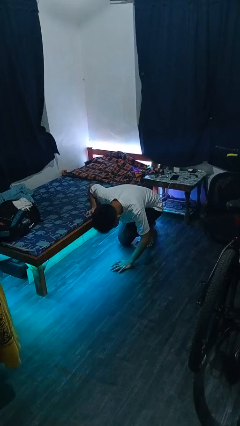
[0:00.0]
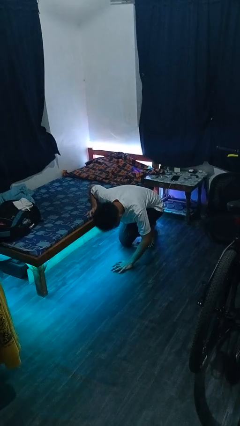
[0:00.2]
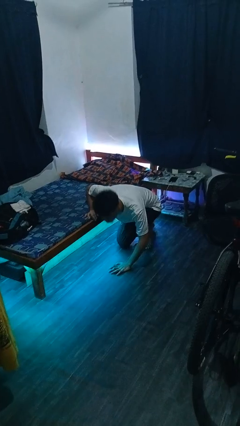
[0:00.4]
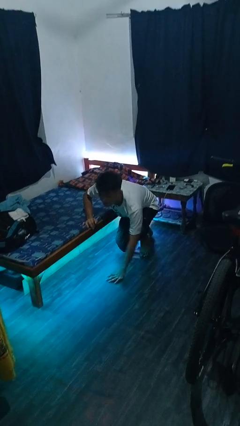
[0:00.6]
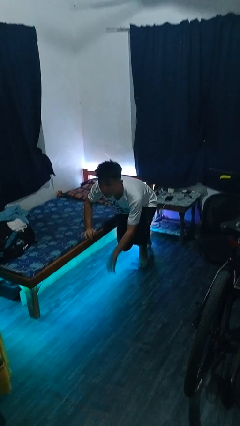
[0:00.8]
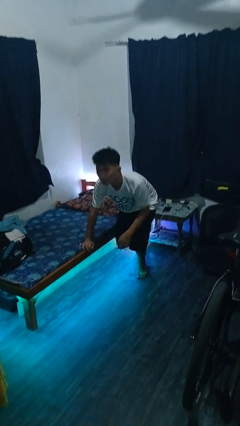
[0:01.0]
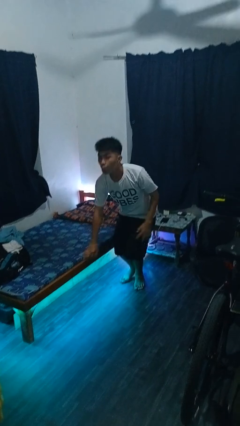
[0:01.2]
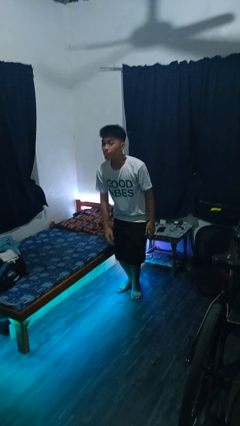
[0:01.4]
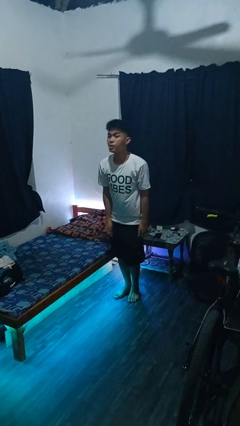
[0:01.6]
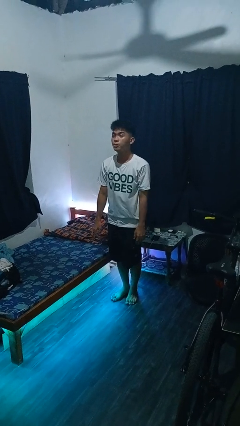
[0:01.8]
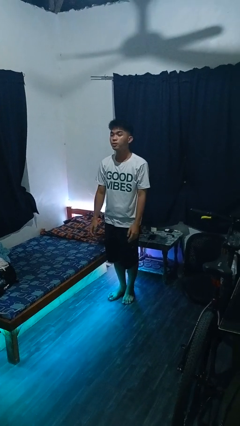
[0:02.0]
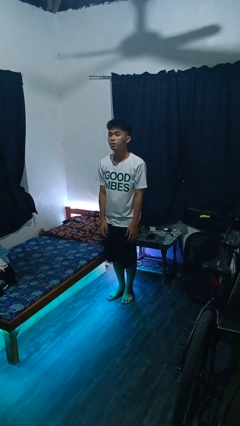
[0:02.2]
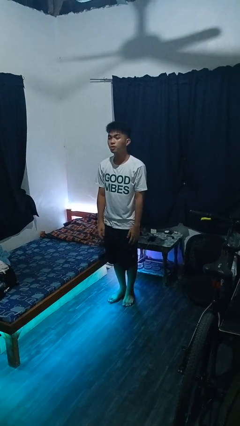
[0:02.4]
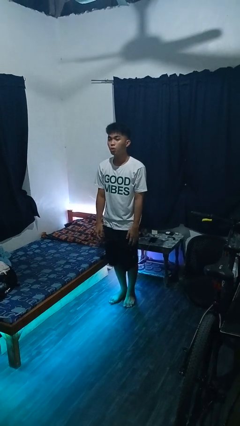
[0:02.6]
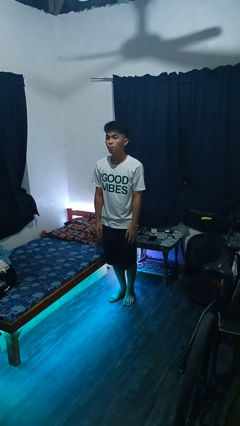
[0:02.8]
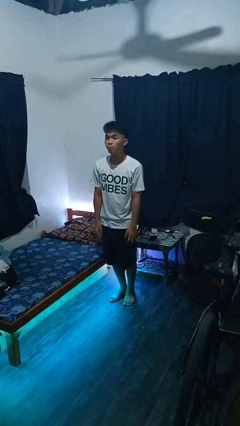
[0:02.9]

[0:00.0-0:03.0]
person stands up from floor

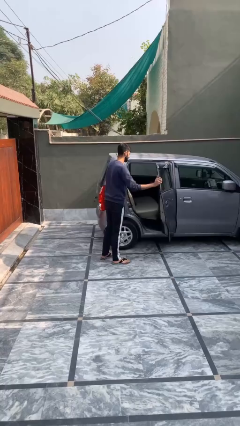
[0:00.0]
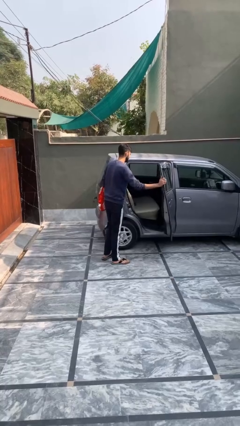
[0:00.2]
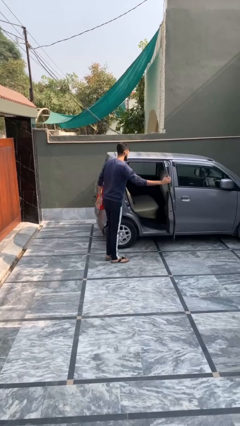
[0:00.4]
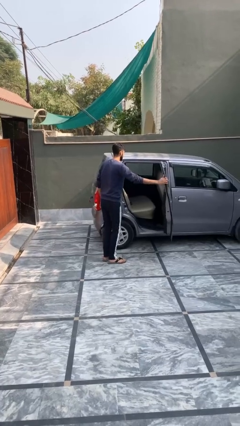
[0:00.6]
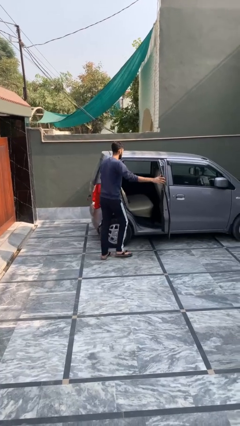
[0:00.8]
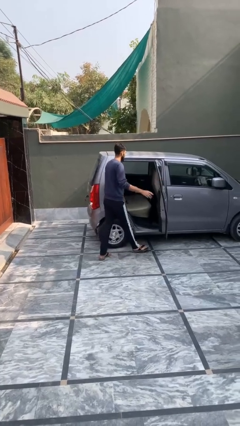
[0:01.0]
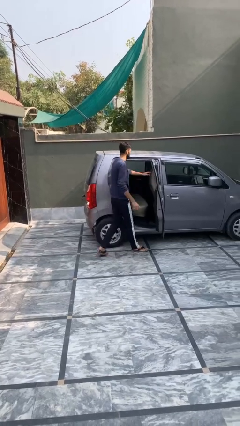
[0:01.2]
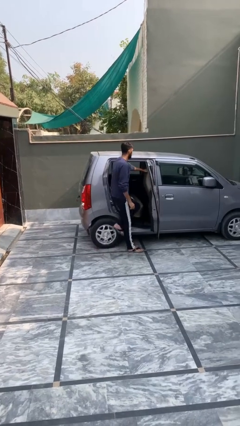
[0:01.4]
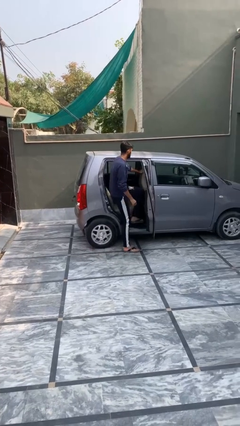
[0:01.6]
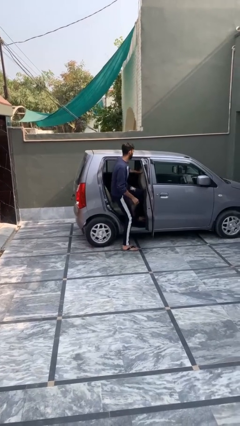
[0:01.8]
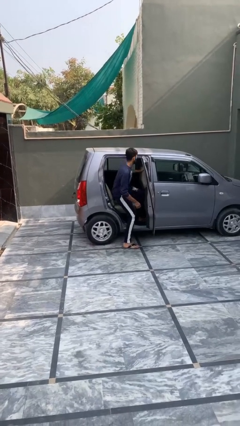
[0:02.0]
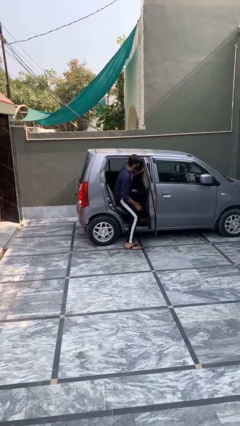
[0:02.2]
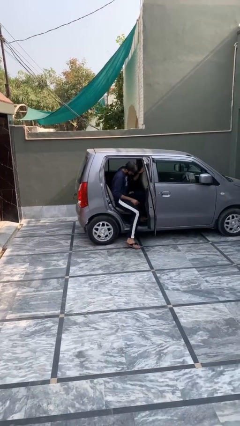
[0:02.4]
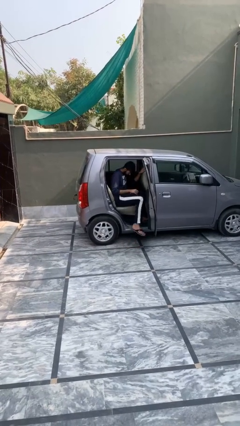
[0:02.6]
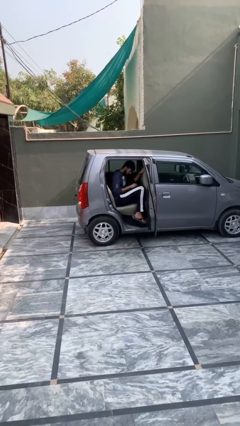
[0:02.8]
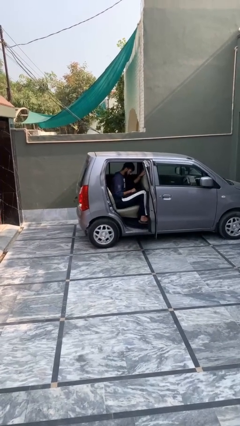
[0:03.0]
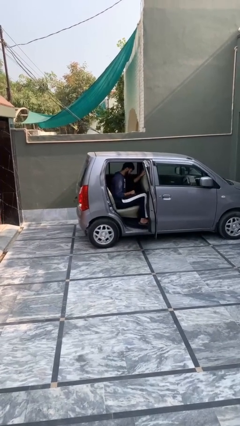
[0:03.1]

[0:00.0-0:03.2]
person enters car

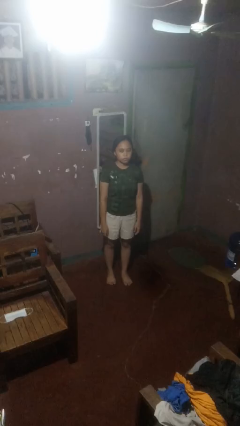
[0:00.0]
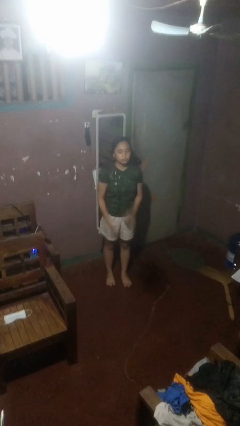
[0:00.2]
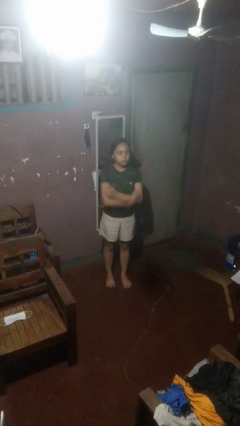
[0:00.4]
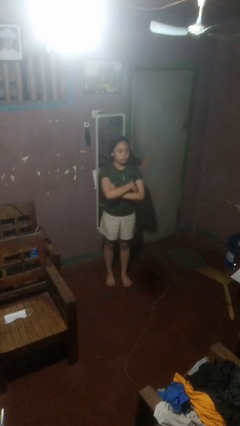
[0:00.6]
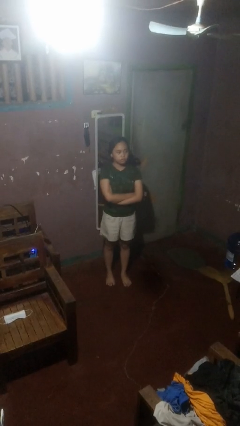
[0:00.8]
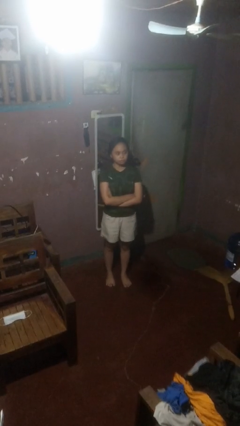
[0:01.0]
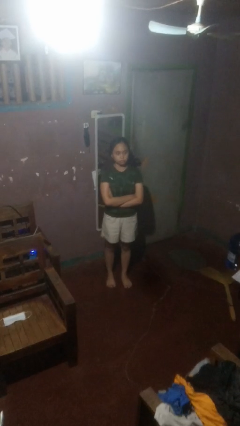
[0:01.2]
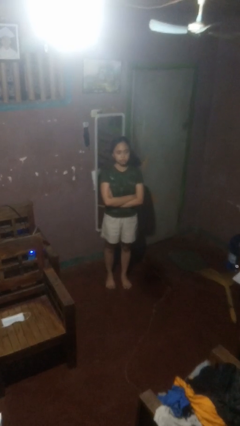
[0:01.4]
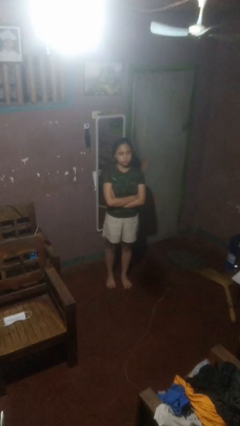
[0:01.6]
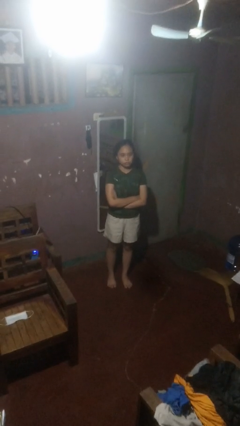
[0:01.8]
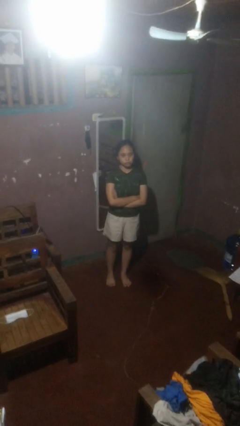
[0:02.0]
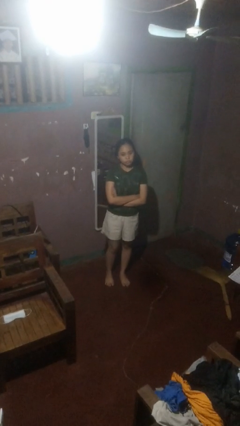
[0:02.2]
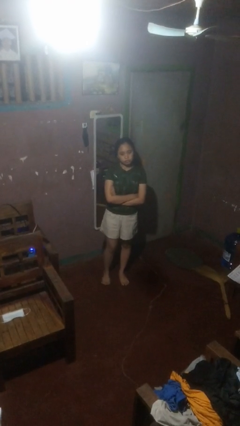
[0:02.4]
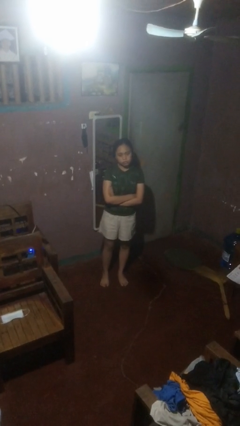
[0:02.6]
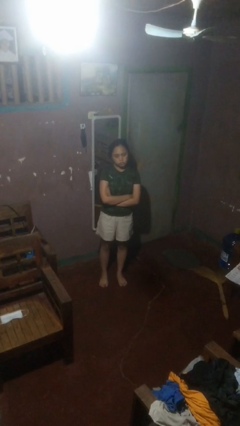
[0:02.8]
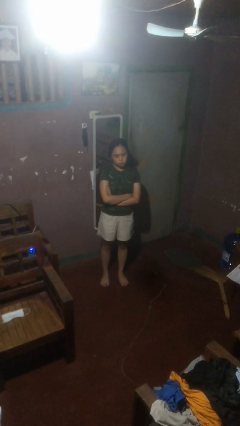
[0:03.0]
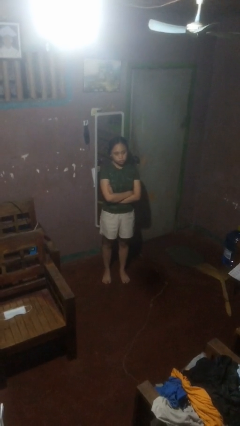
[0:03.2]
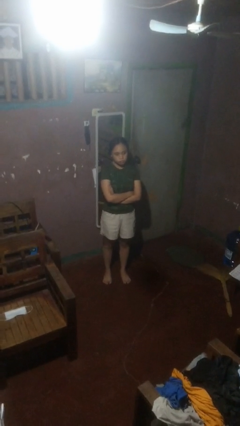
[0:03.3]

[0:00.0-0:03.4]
person crosses arms

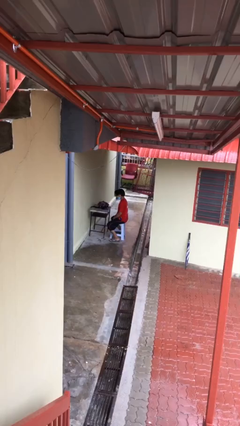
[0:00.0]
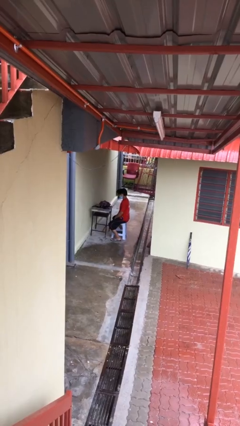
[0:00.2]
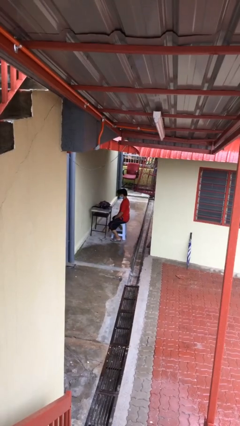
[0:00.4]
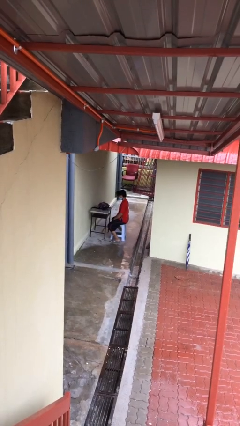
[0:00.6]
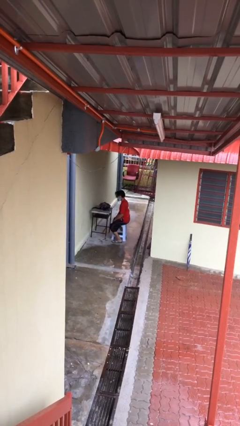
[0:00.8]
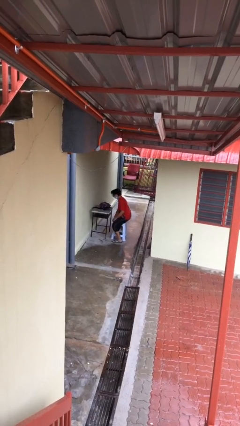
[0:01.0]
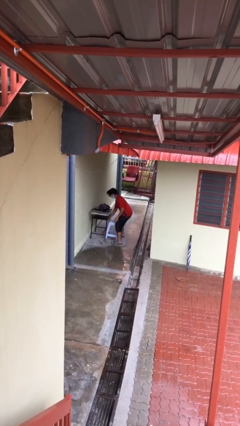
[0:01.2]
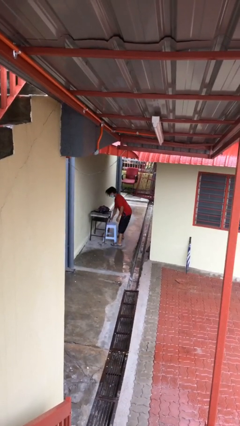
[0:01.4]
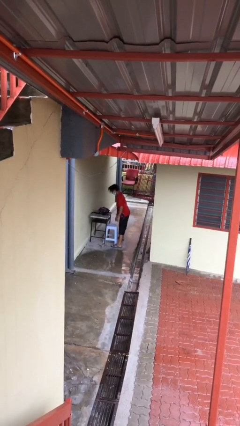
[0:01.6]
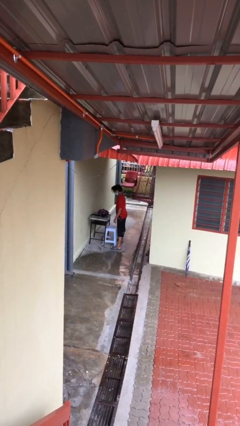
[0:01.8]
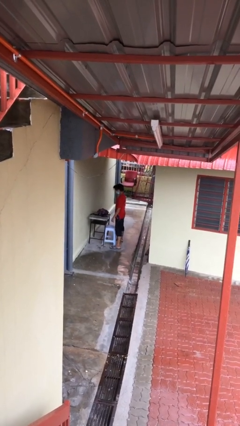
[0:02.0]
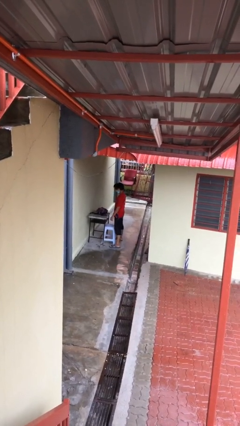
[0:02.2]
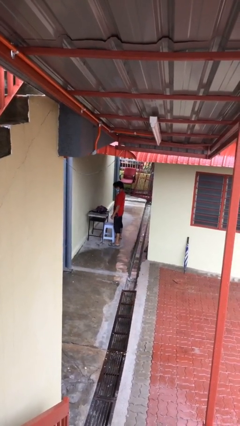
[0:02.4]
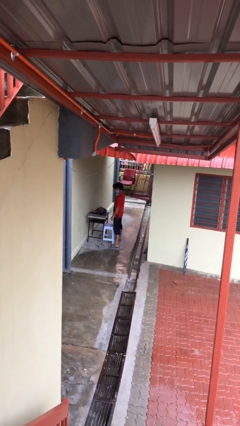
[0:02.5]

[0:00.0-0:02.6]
person stands up

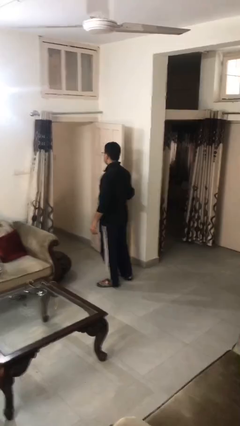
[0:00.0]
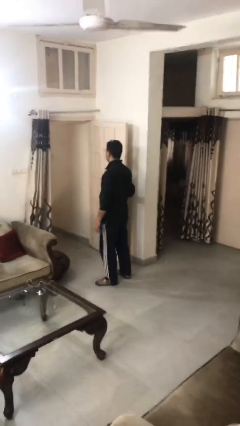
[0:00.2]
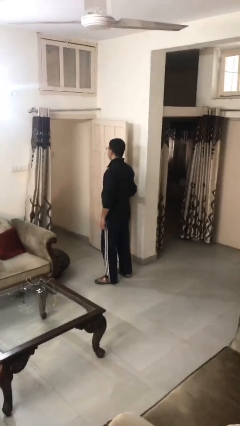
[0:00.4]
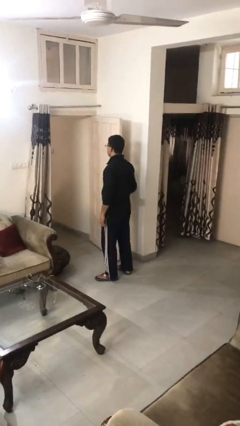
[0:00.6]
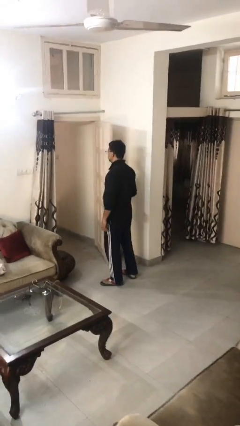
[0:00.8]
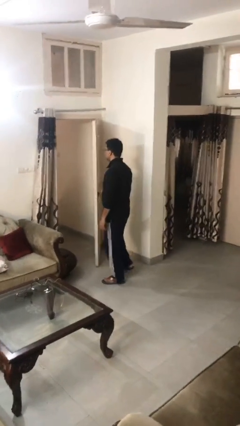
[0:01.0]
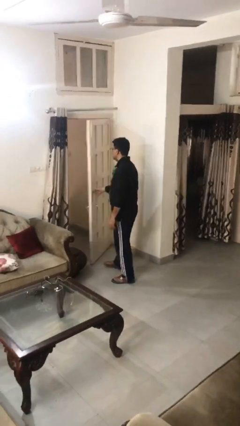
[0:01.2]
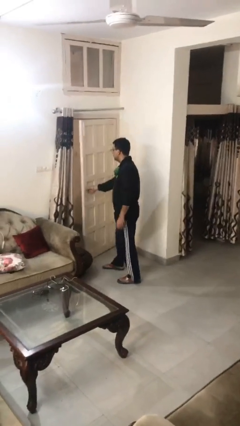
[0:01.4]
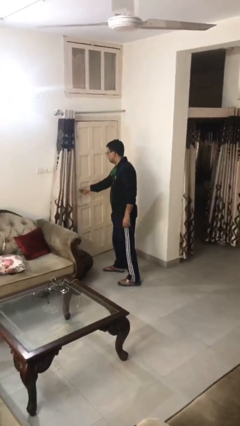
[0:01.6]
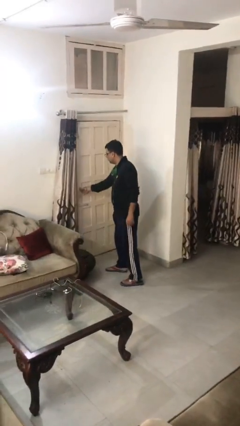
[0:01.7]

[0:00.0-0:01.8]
person closes facility door

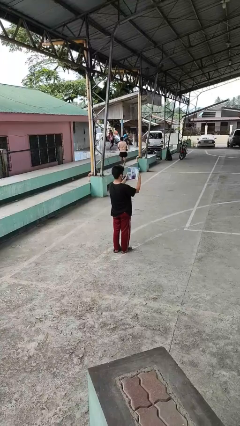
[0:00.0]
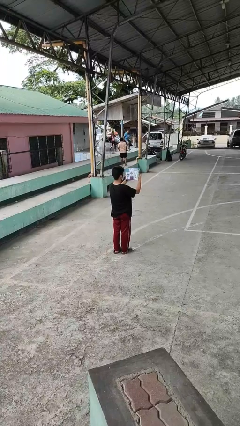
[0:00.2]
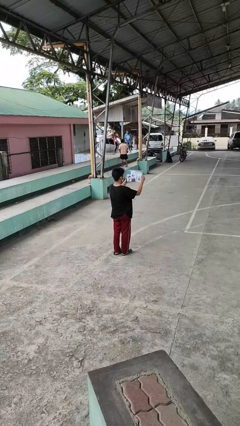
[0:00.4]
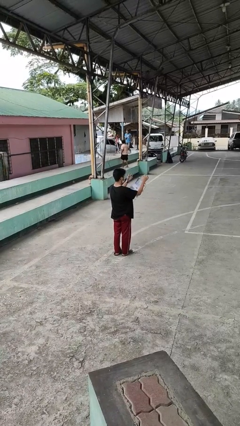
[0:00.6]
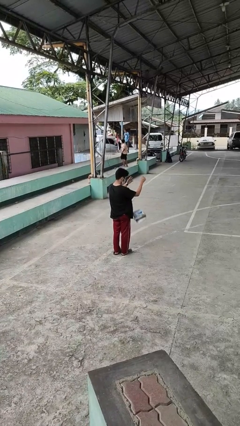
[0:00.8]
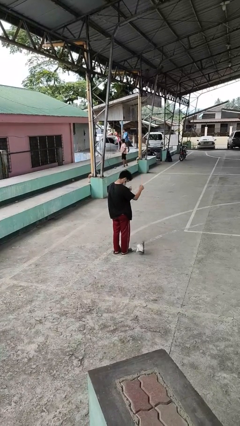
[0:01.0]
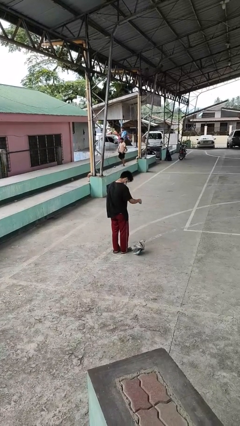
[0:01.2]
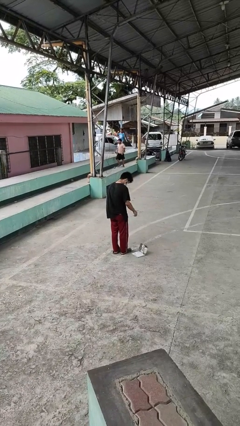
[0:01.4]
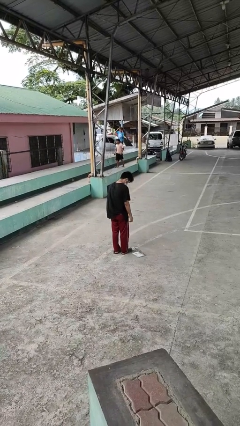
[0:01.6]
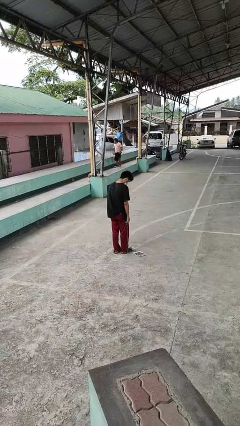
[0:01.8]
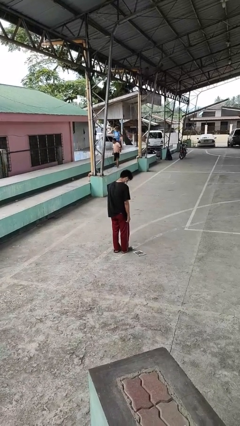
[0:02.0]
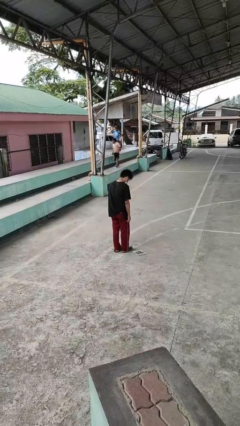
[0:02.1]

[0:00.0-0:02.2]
person drops object

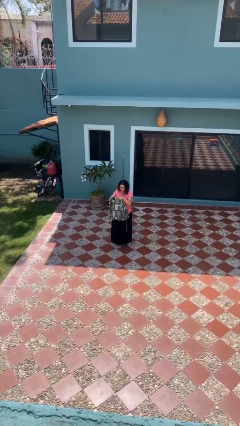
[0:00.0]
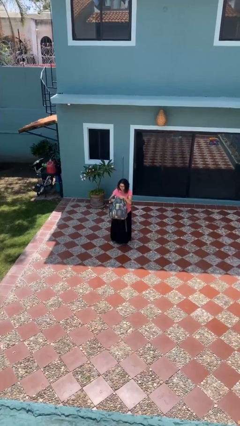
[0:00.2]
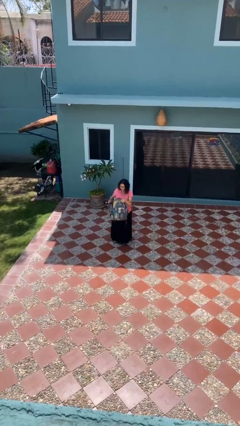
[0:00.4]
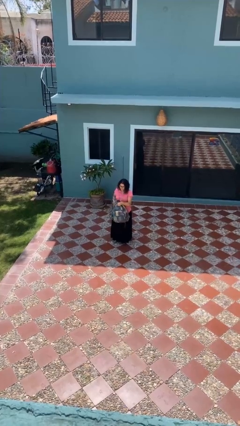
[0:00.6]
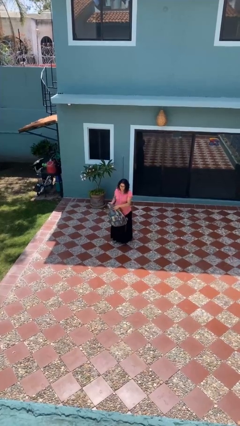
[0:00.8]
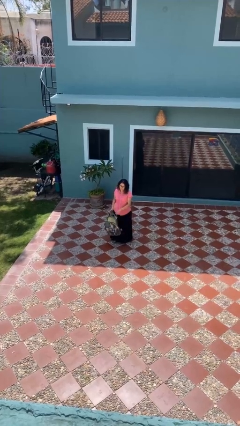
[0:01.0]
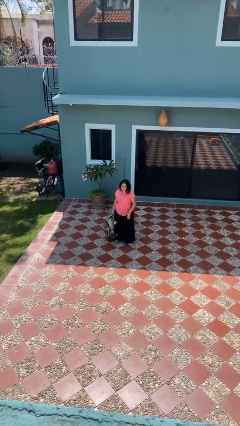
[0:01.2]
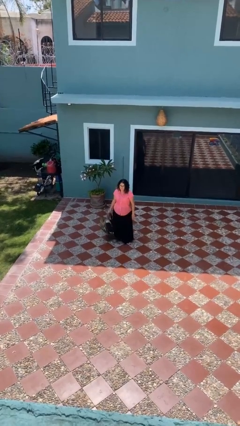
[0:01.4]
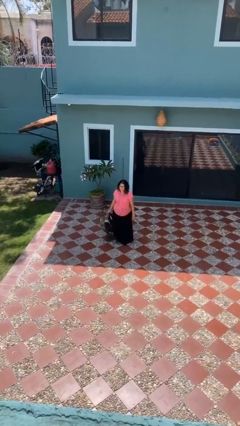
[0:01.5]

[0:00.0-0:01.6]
person puts object into backpack
